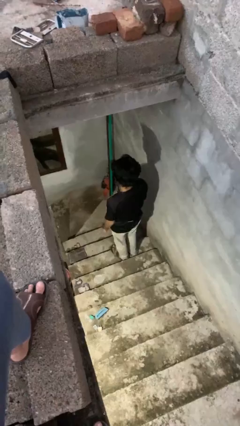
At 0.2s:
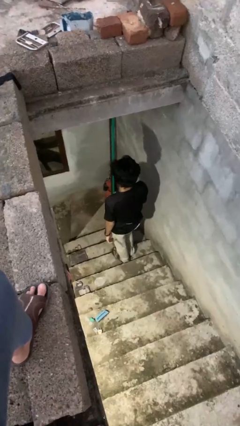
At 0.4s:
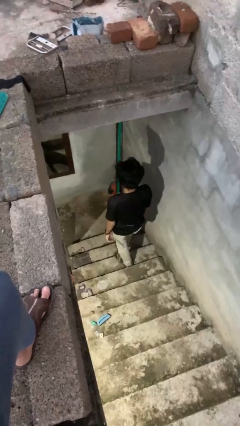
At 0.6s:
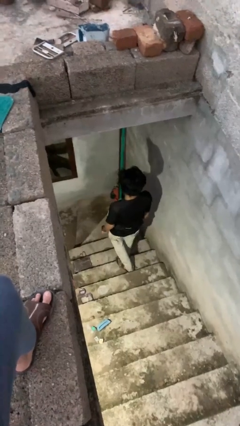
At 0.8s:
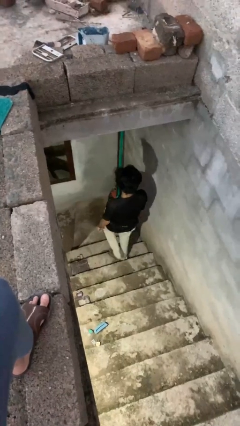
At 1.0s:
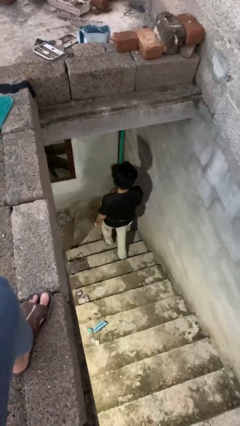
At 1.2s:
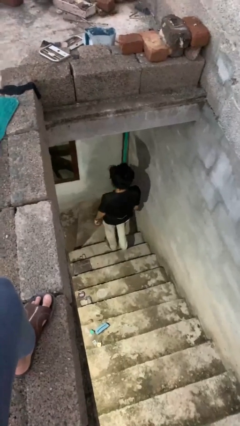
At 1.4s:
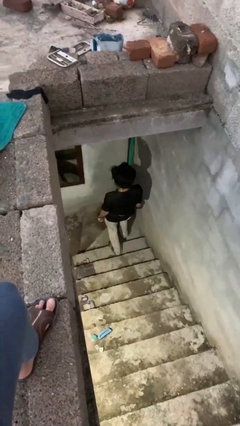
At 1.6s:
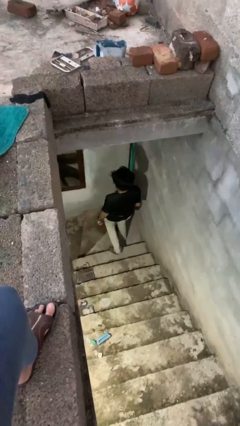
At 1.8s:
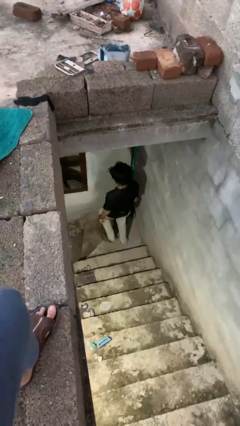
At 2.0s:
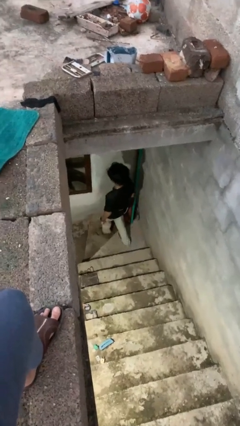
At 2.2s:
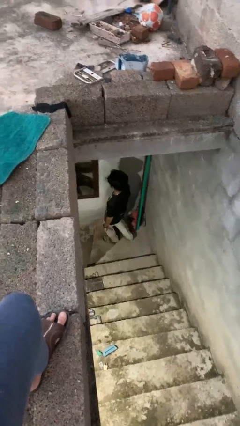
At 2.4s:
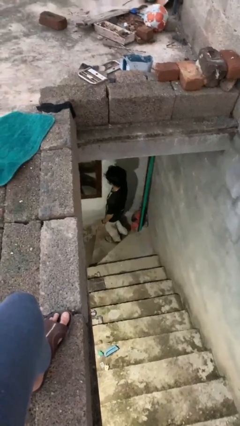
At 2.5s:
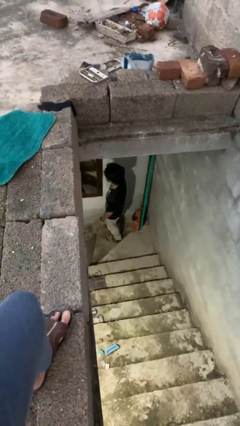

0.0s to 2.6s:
person climbs down stairs

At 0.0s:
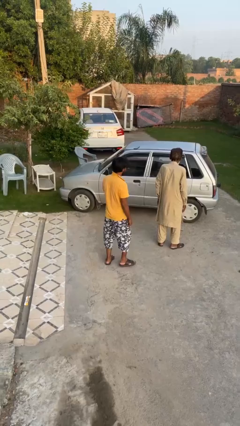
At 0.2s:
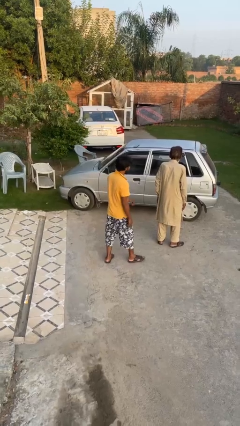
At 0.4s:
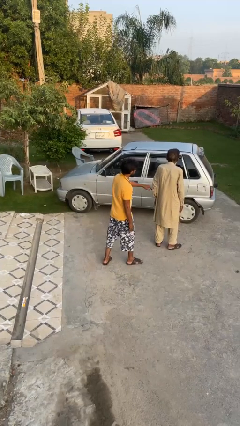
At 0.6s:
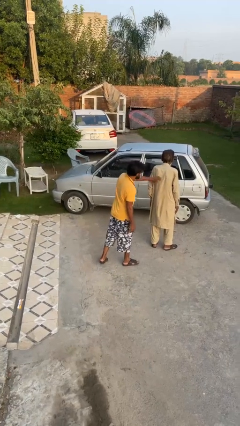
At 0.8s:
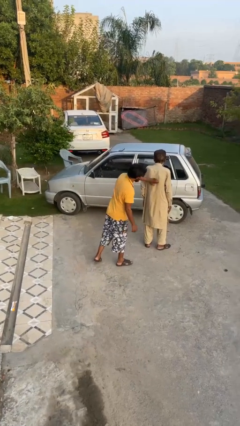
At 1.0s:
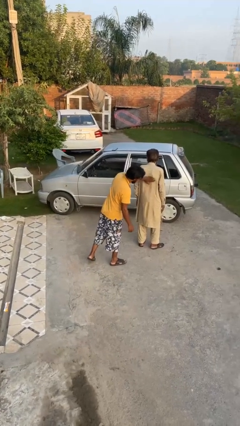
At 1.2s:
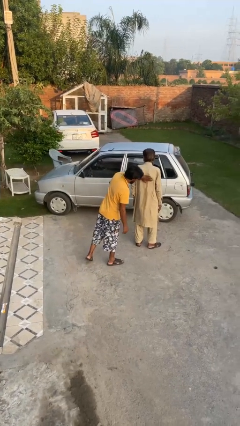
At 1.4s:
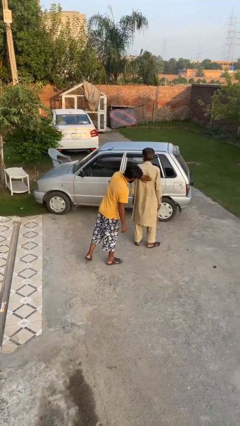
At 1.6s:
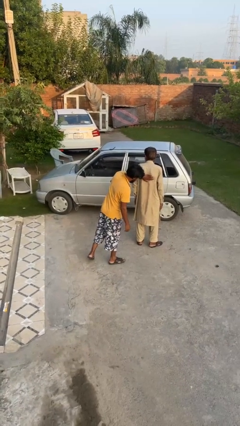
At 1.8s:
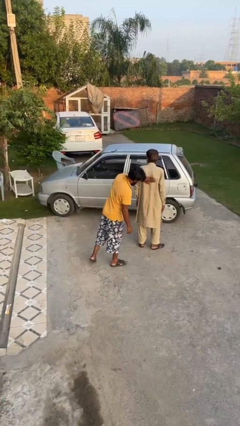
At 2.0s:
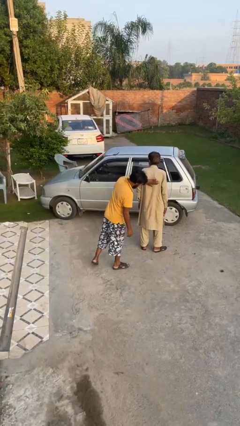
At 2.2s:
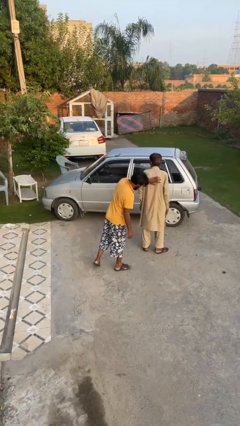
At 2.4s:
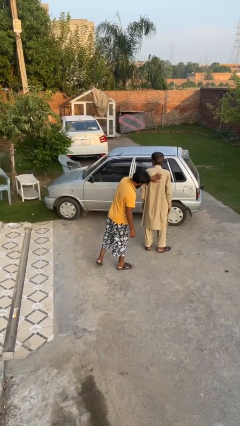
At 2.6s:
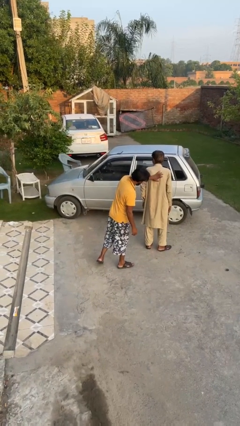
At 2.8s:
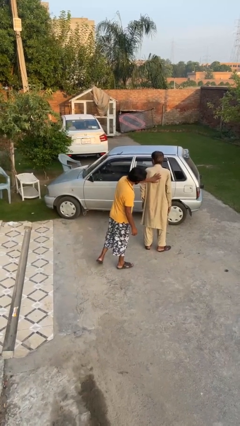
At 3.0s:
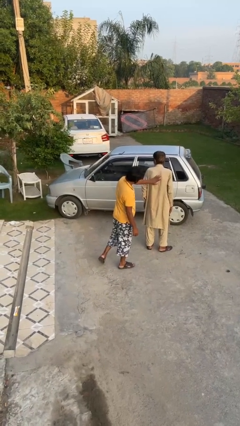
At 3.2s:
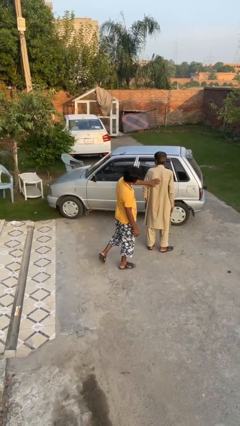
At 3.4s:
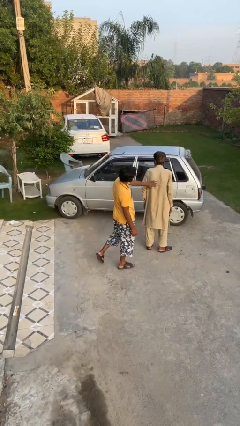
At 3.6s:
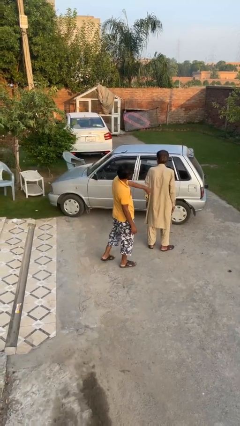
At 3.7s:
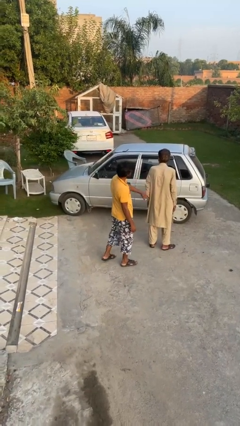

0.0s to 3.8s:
person touches back of person

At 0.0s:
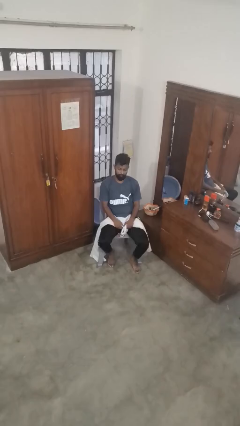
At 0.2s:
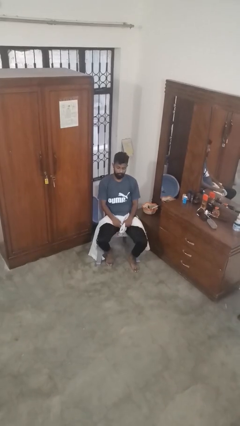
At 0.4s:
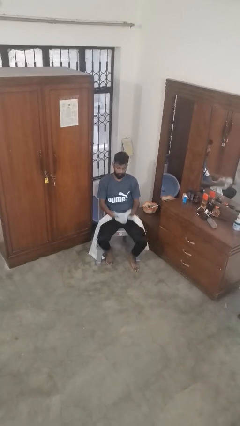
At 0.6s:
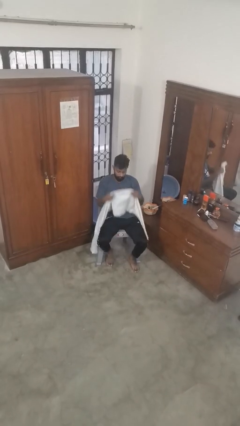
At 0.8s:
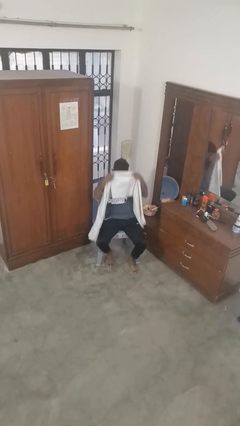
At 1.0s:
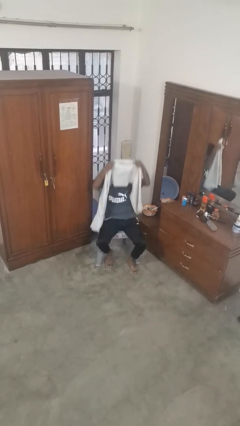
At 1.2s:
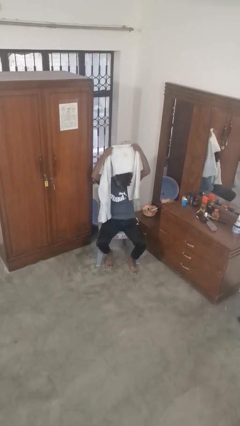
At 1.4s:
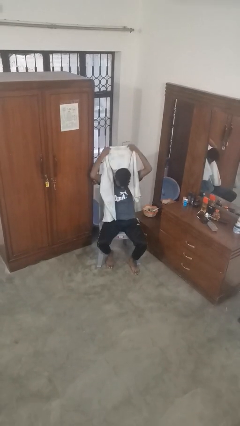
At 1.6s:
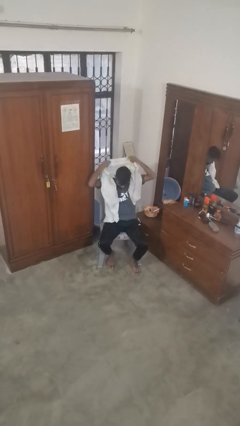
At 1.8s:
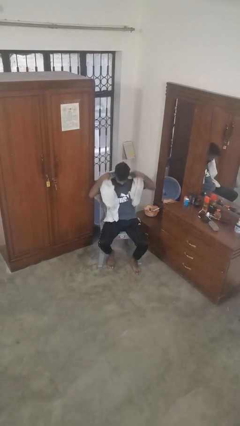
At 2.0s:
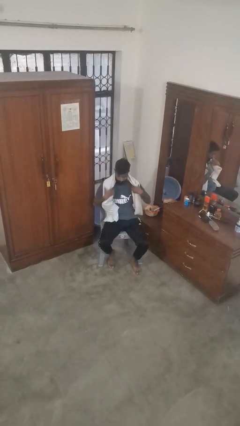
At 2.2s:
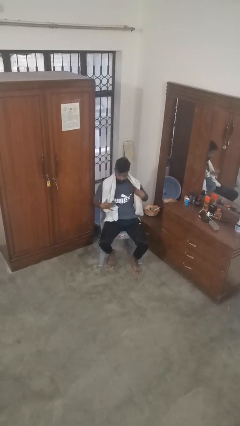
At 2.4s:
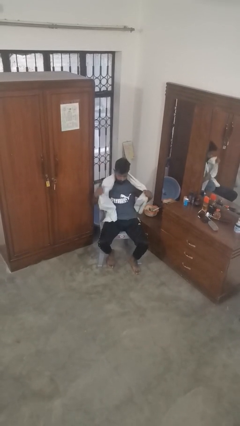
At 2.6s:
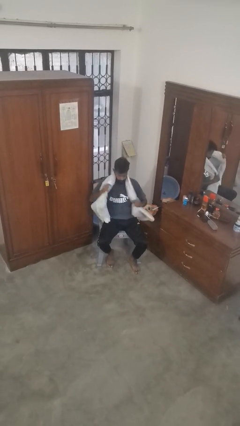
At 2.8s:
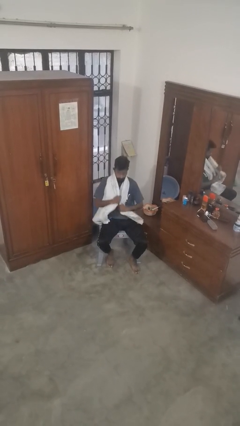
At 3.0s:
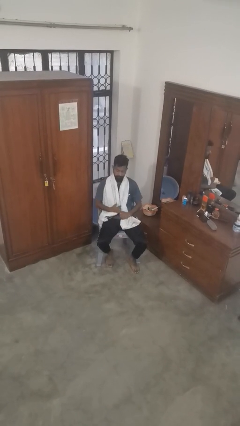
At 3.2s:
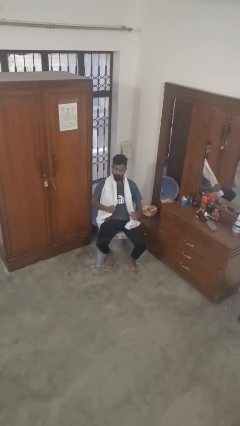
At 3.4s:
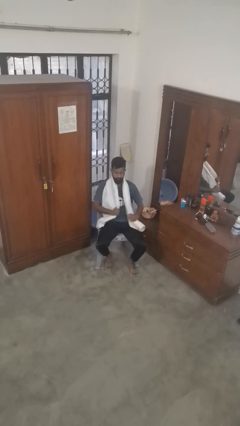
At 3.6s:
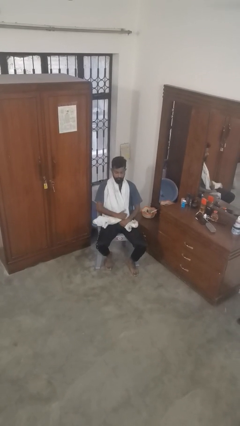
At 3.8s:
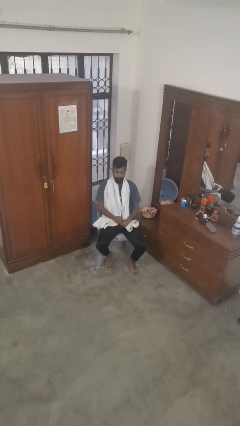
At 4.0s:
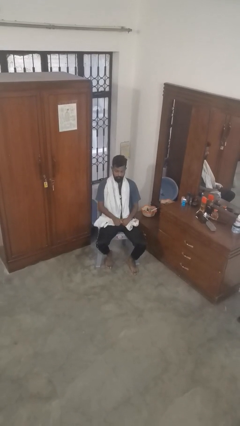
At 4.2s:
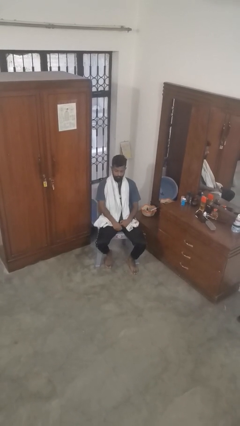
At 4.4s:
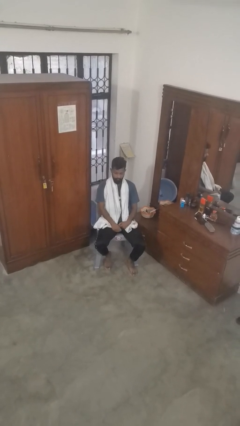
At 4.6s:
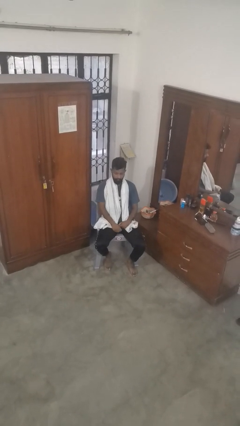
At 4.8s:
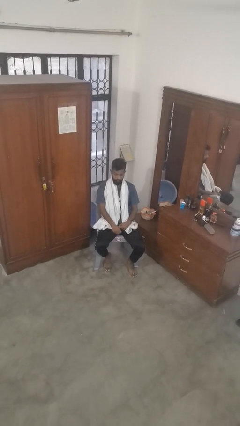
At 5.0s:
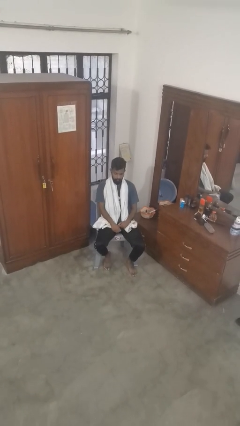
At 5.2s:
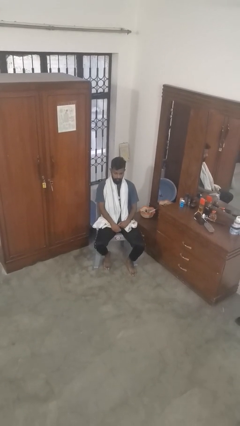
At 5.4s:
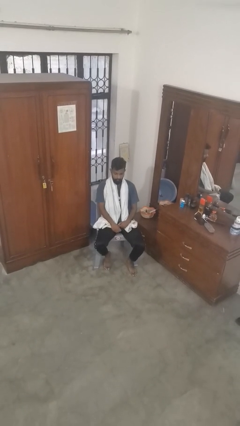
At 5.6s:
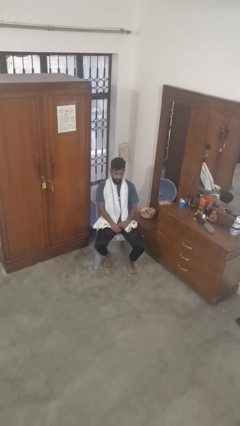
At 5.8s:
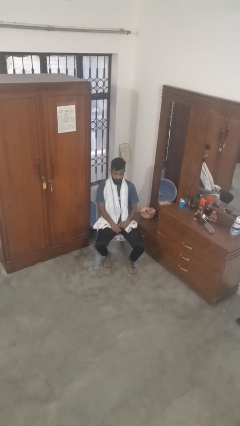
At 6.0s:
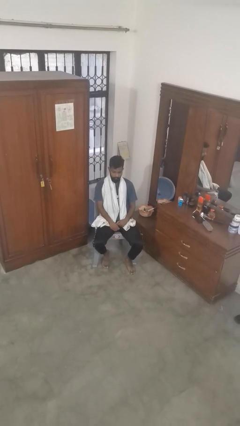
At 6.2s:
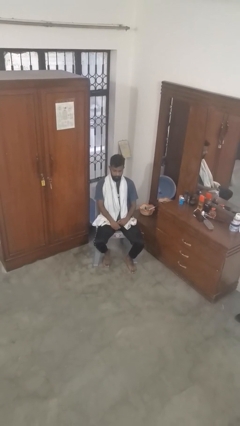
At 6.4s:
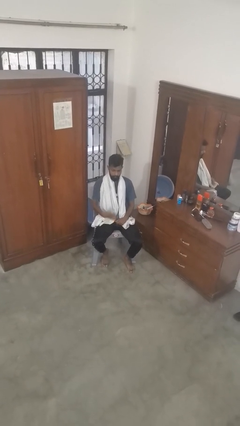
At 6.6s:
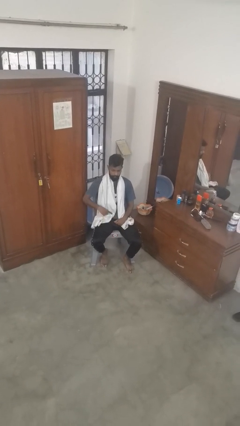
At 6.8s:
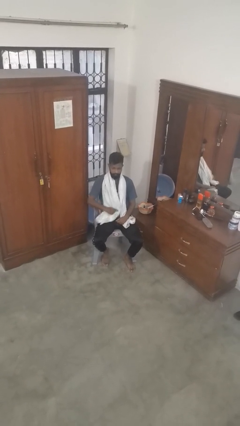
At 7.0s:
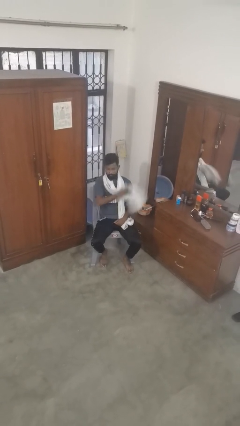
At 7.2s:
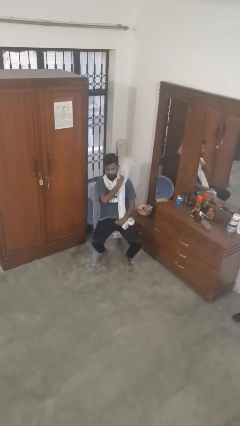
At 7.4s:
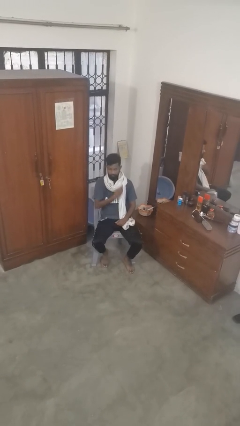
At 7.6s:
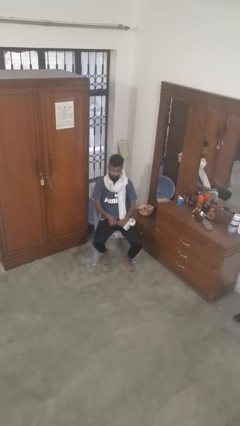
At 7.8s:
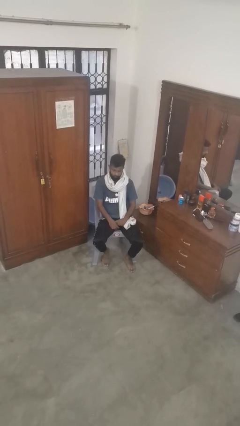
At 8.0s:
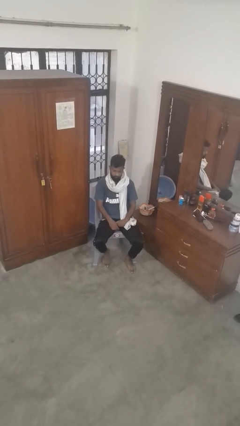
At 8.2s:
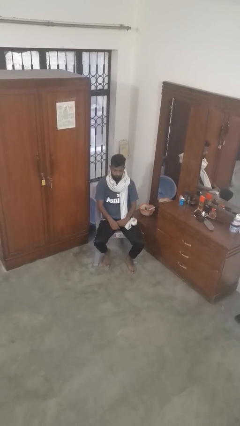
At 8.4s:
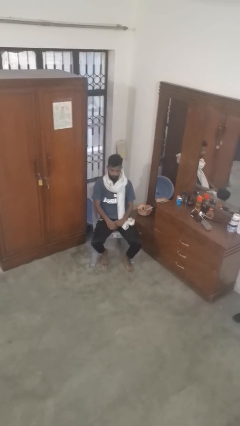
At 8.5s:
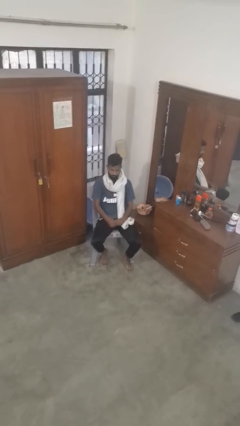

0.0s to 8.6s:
person puts on scarf

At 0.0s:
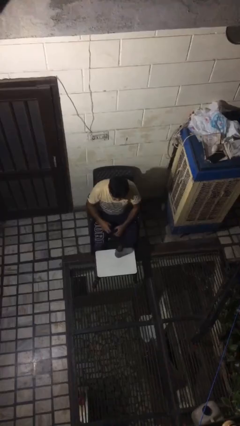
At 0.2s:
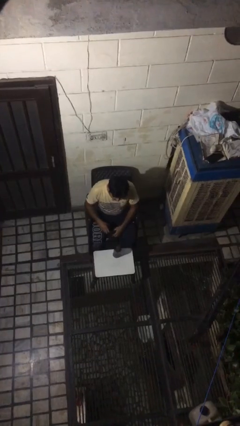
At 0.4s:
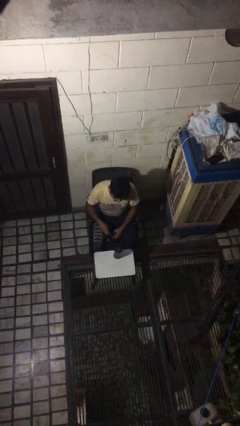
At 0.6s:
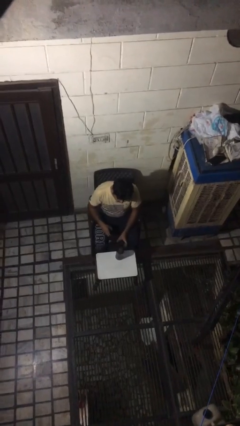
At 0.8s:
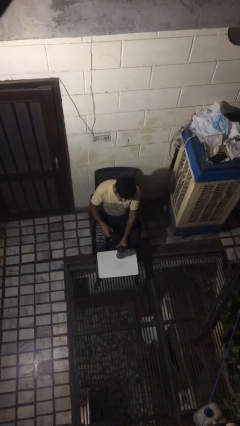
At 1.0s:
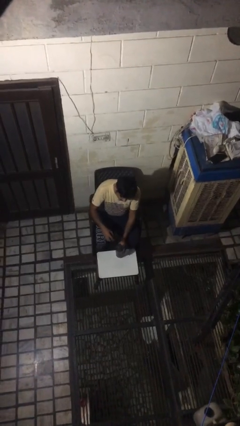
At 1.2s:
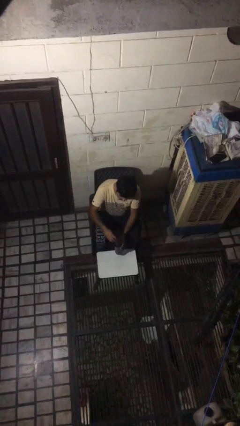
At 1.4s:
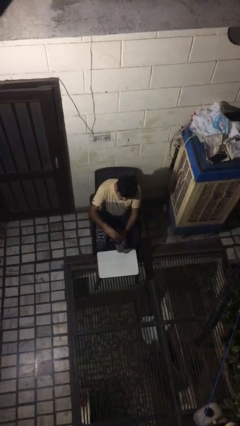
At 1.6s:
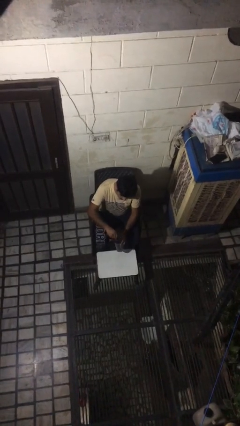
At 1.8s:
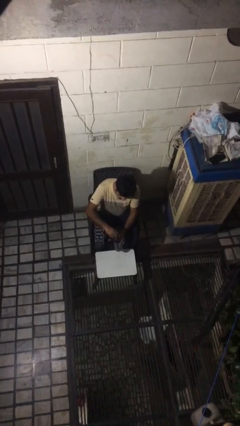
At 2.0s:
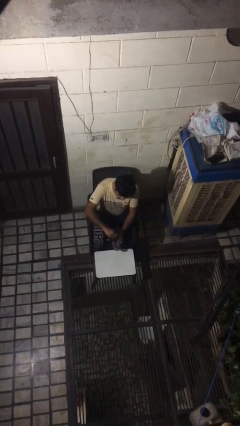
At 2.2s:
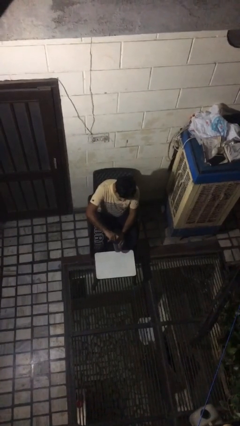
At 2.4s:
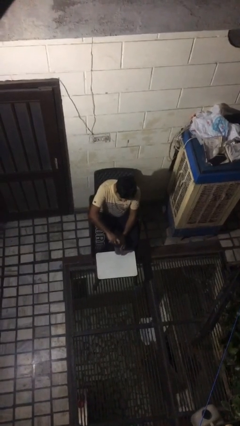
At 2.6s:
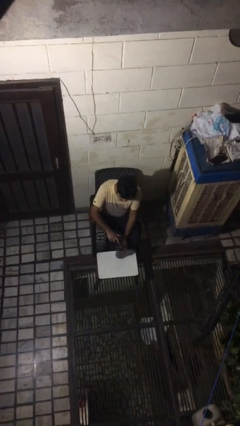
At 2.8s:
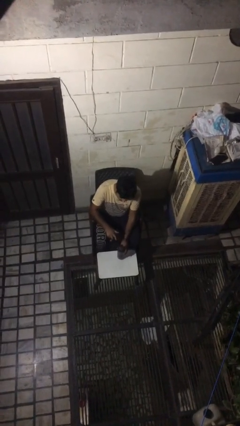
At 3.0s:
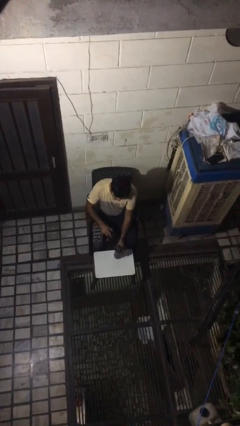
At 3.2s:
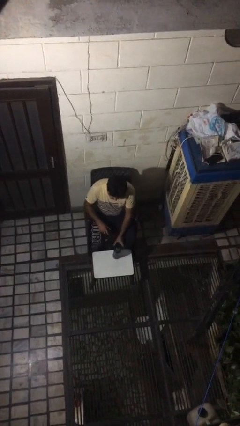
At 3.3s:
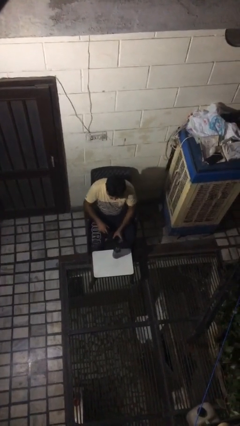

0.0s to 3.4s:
person screws lid to bottle
